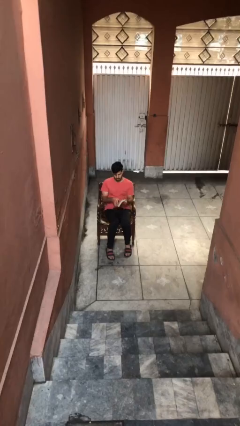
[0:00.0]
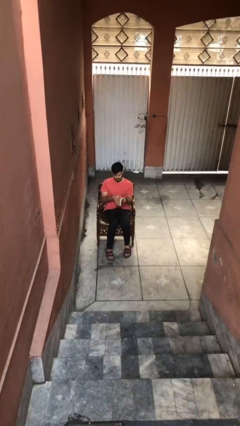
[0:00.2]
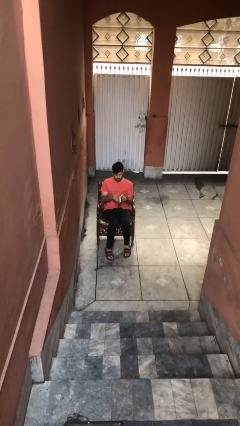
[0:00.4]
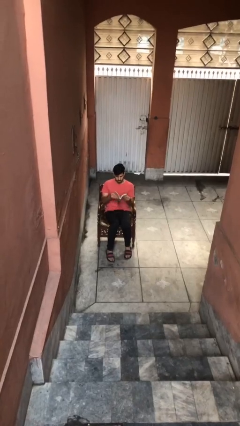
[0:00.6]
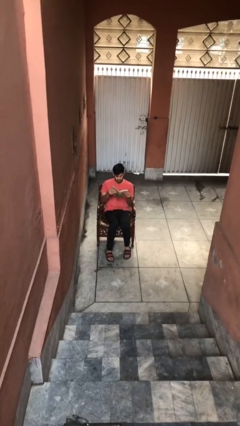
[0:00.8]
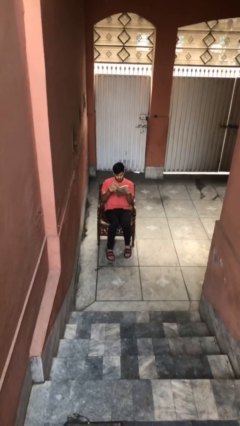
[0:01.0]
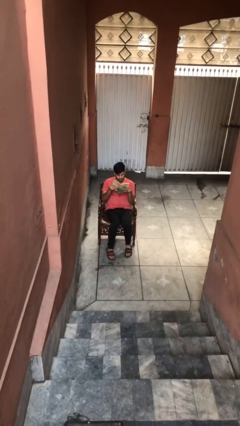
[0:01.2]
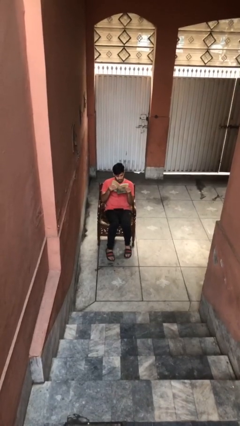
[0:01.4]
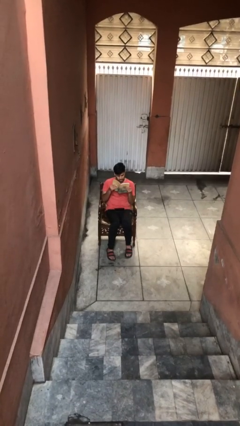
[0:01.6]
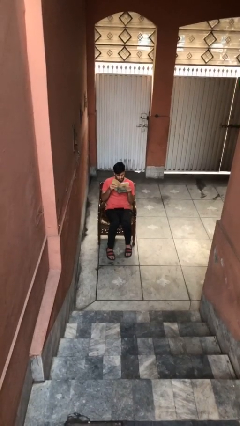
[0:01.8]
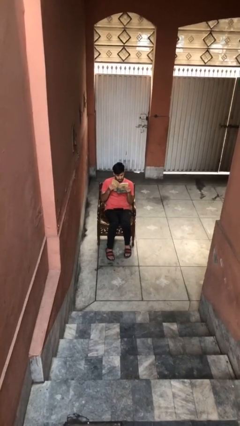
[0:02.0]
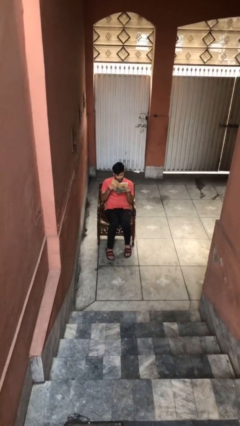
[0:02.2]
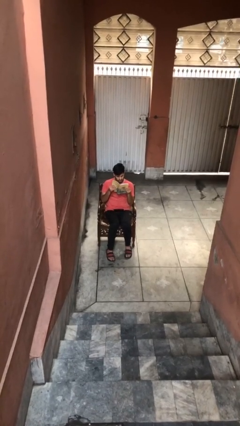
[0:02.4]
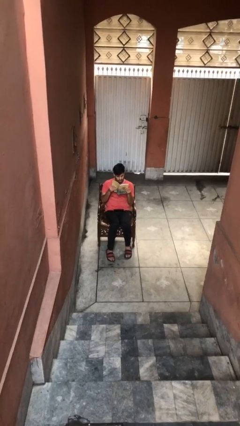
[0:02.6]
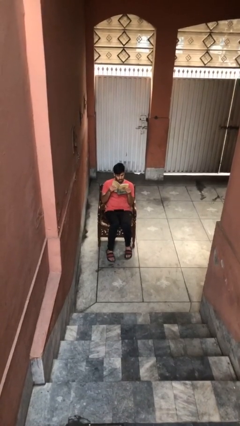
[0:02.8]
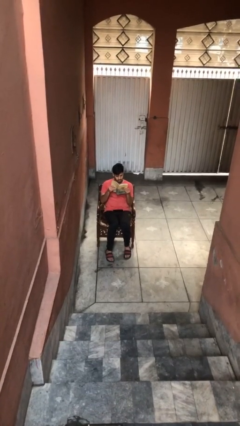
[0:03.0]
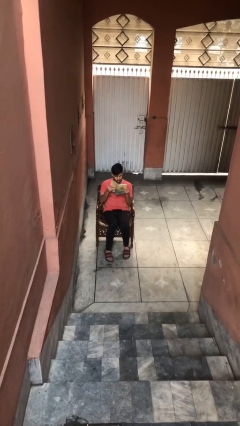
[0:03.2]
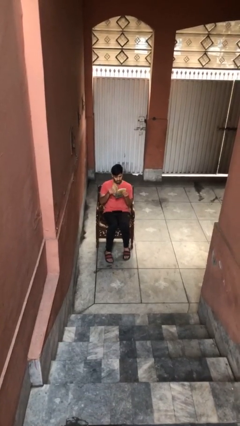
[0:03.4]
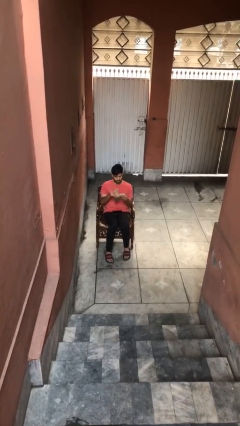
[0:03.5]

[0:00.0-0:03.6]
person reads document

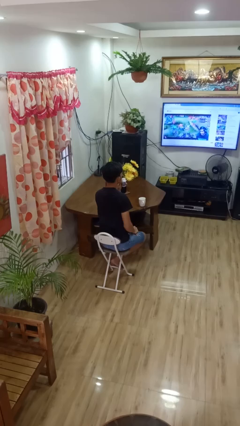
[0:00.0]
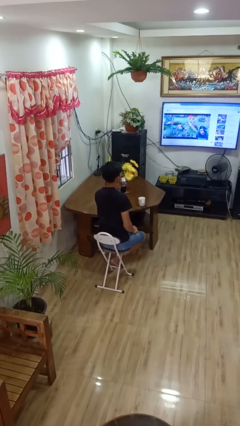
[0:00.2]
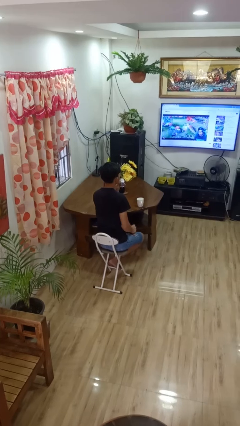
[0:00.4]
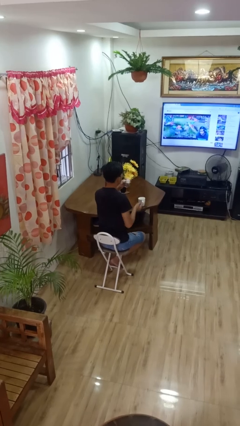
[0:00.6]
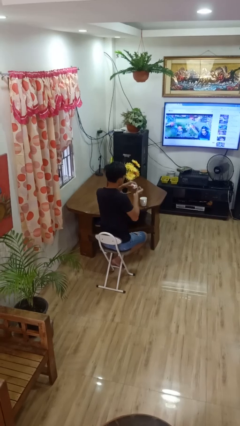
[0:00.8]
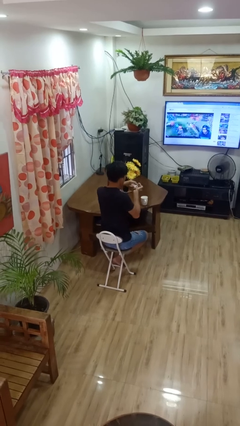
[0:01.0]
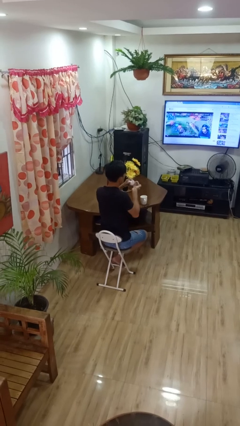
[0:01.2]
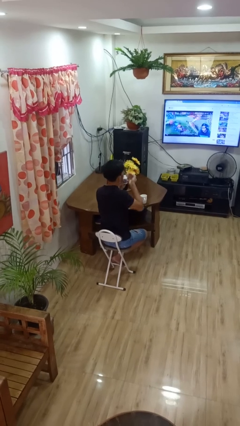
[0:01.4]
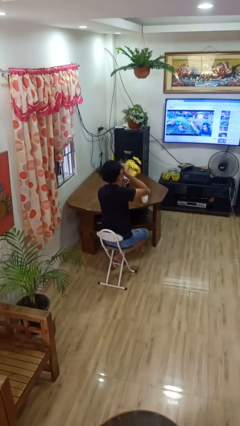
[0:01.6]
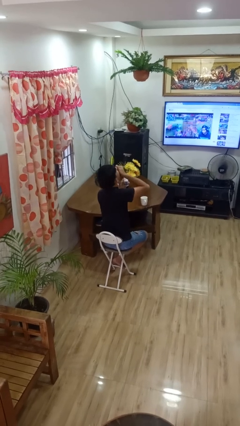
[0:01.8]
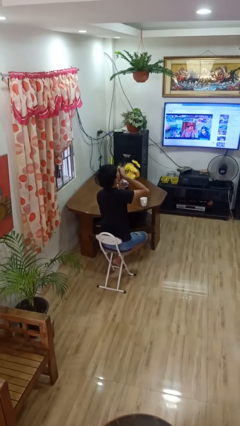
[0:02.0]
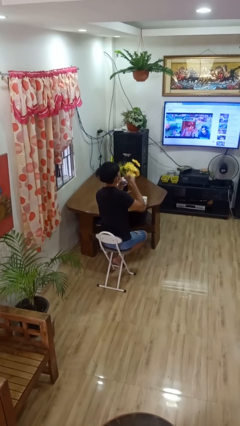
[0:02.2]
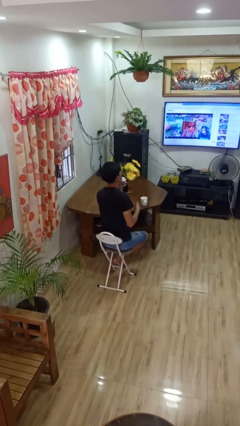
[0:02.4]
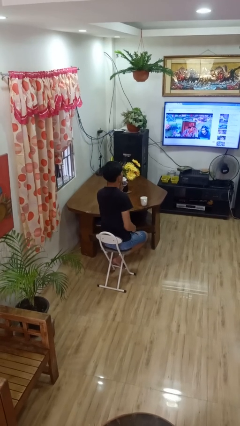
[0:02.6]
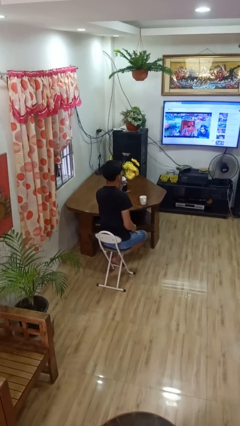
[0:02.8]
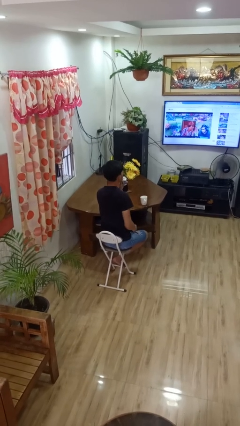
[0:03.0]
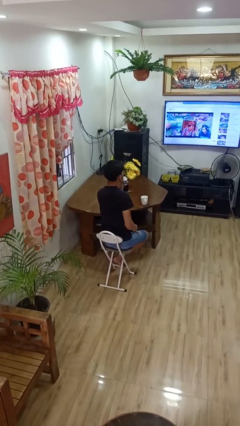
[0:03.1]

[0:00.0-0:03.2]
person takes medicine pills

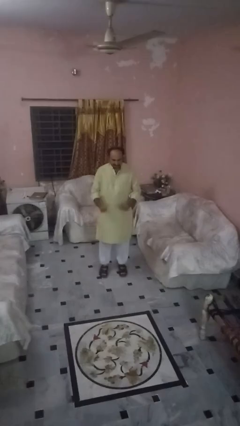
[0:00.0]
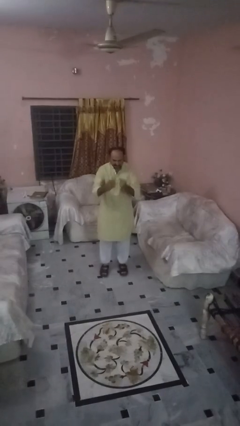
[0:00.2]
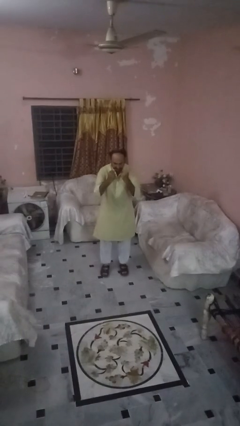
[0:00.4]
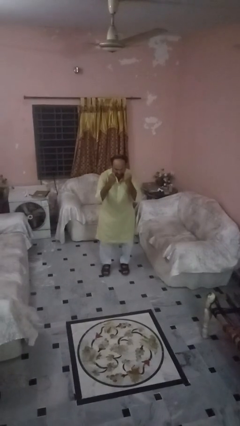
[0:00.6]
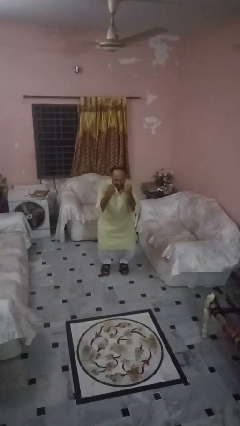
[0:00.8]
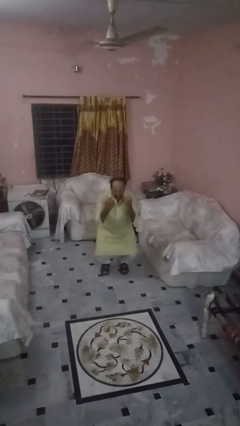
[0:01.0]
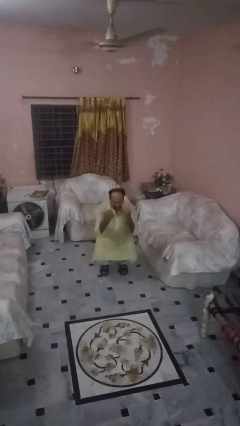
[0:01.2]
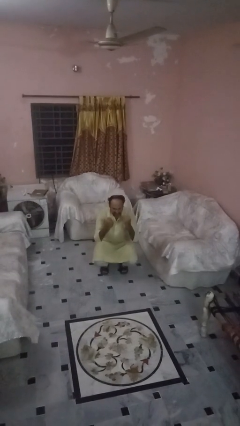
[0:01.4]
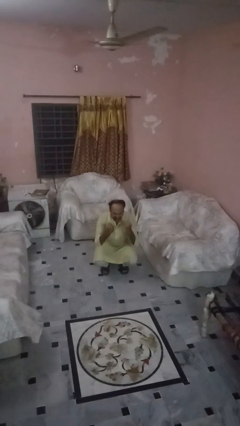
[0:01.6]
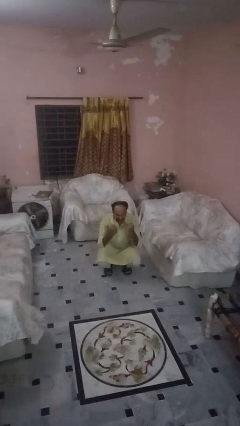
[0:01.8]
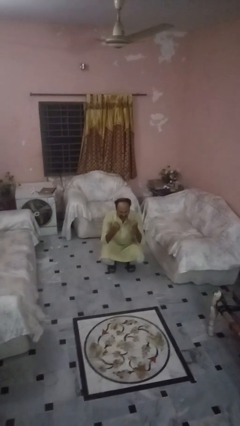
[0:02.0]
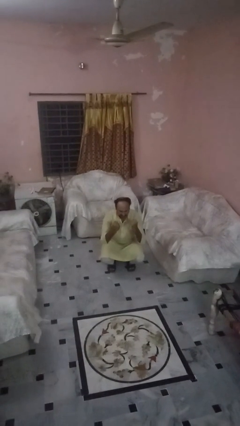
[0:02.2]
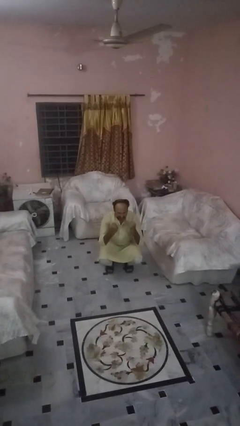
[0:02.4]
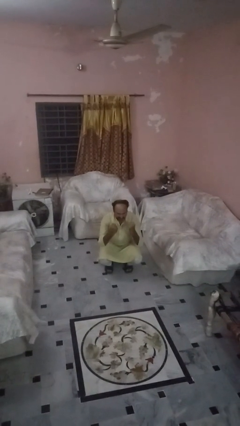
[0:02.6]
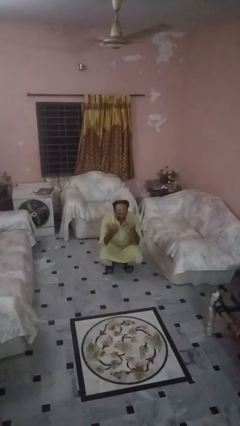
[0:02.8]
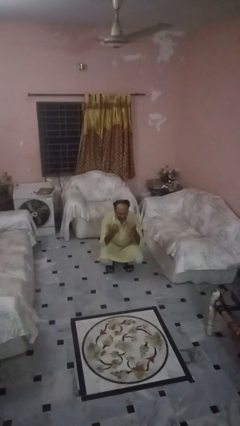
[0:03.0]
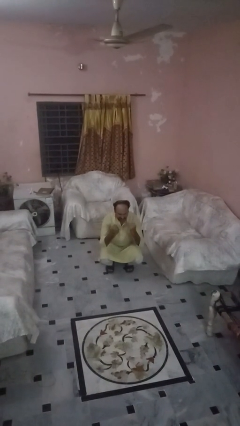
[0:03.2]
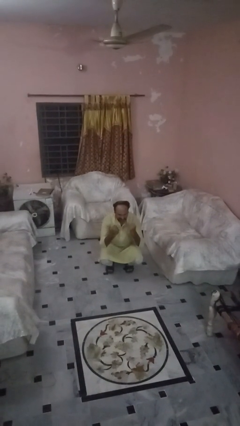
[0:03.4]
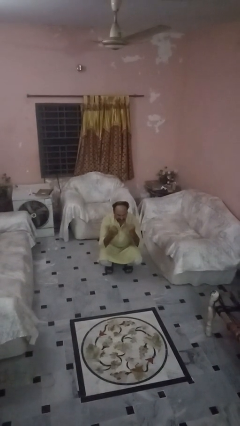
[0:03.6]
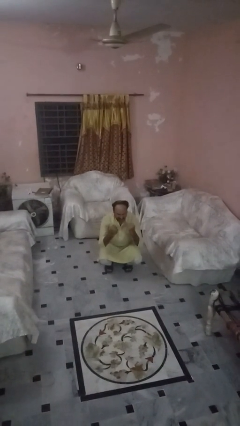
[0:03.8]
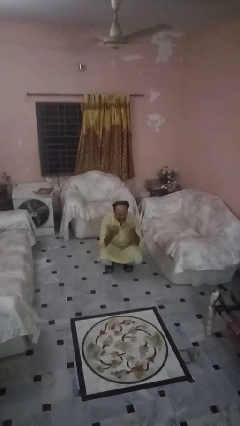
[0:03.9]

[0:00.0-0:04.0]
person squats

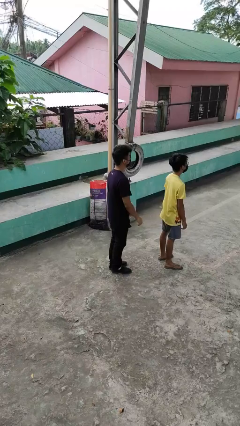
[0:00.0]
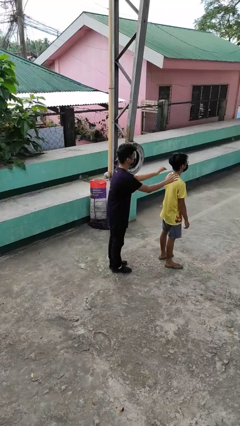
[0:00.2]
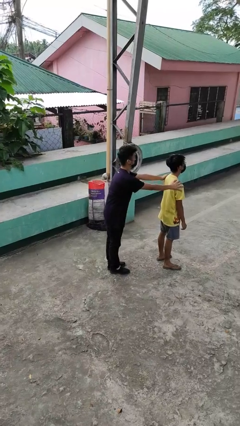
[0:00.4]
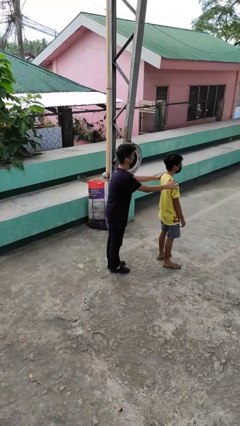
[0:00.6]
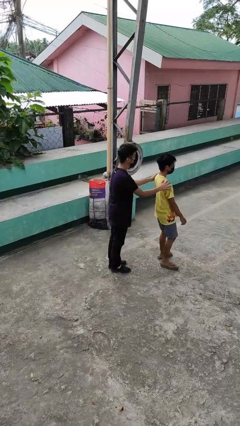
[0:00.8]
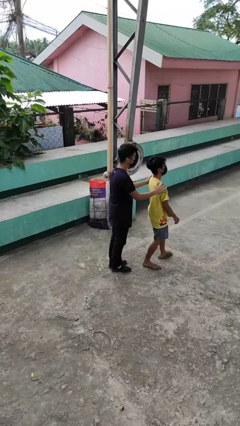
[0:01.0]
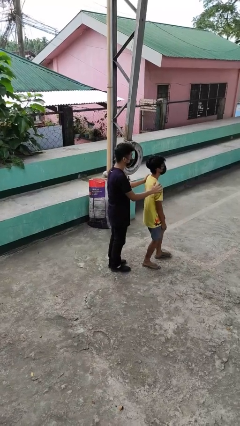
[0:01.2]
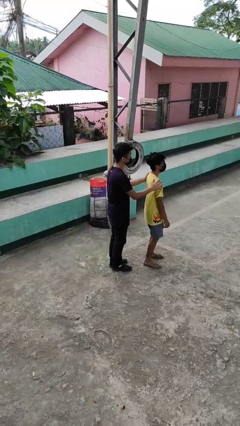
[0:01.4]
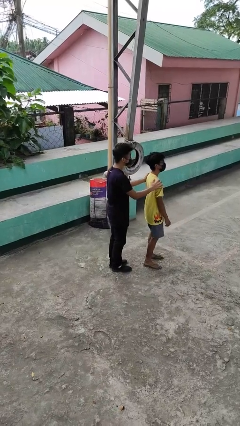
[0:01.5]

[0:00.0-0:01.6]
person grabs person by shoulder

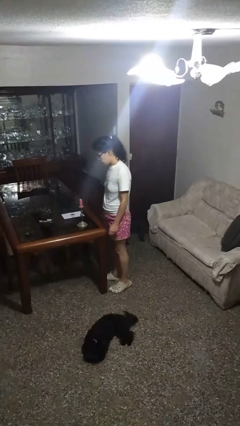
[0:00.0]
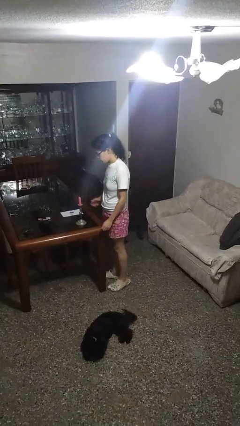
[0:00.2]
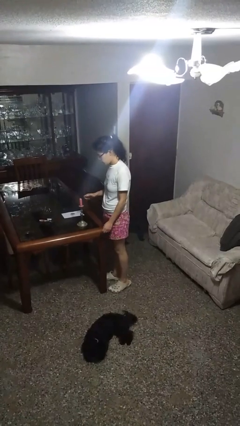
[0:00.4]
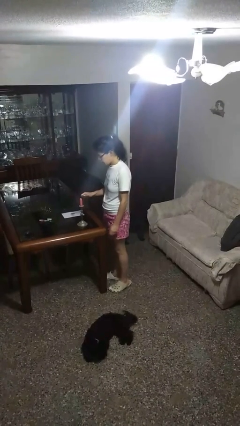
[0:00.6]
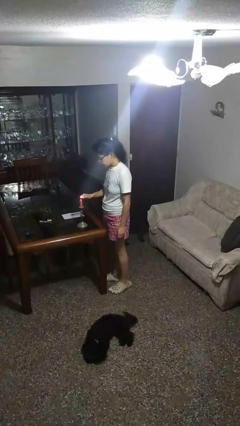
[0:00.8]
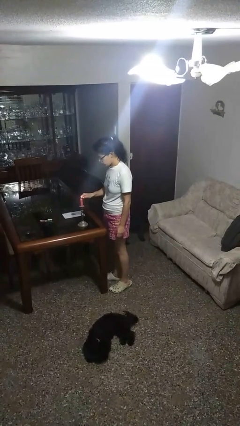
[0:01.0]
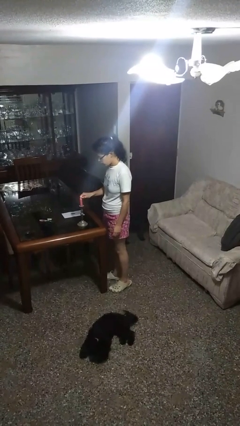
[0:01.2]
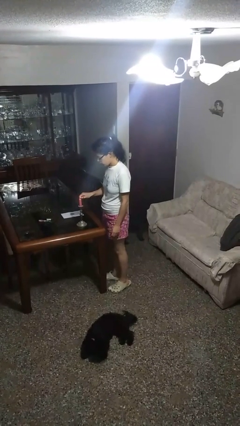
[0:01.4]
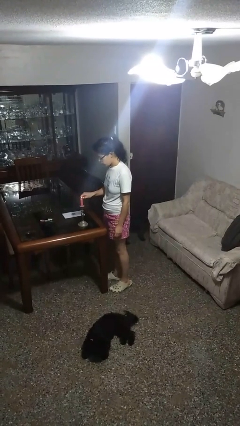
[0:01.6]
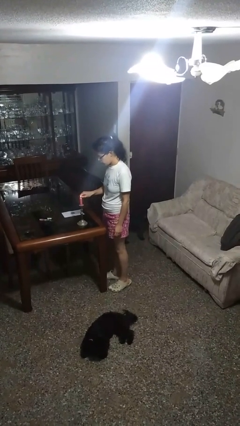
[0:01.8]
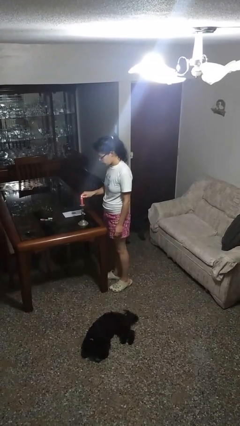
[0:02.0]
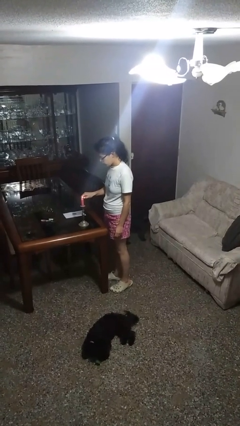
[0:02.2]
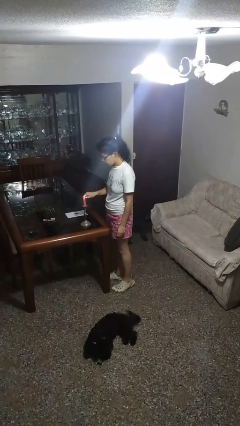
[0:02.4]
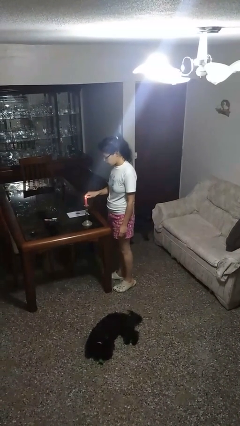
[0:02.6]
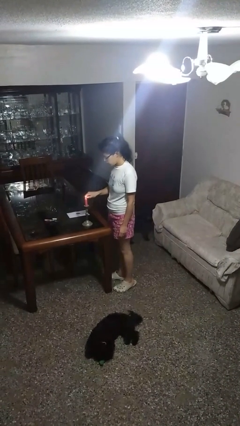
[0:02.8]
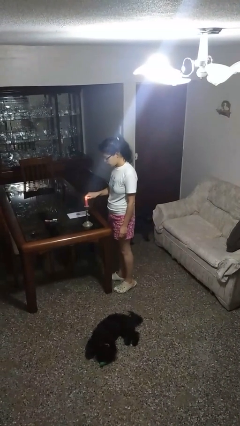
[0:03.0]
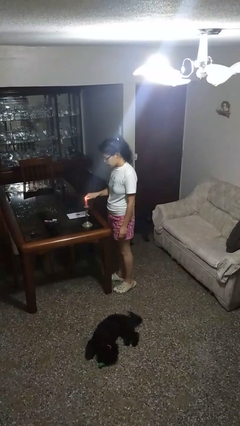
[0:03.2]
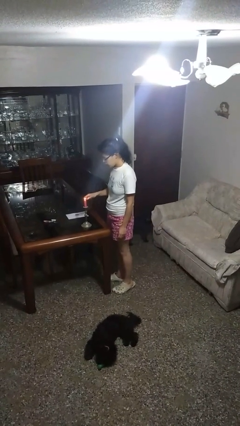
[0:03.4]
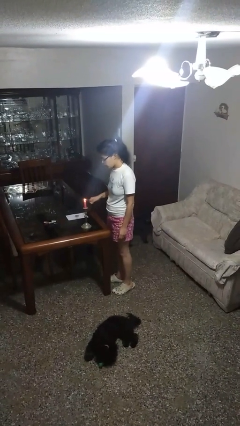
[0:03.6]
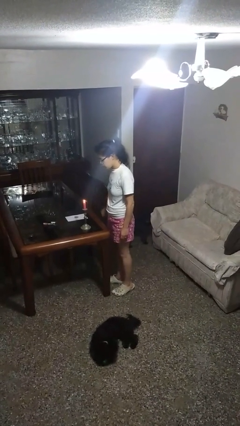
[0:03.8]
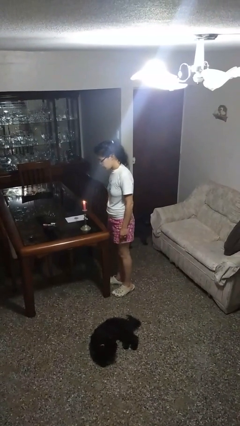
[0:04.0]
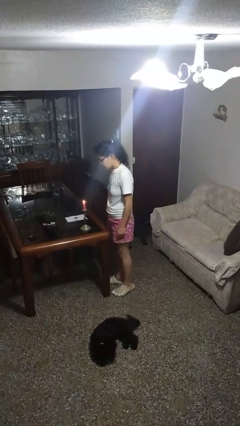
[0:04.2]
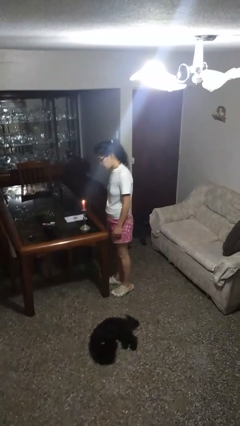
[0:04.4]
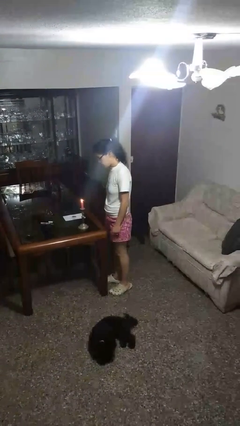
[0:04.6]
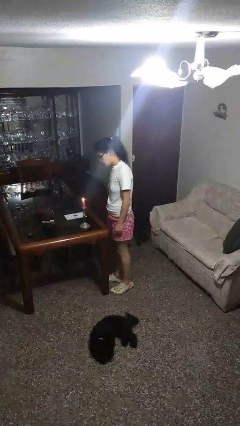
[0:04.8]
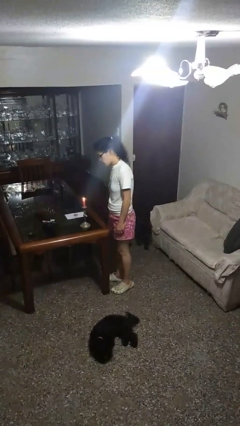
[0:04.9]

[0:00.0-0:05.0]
person lights candle

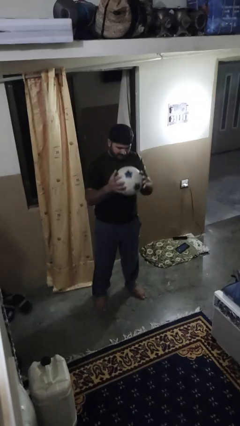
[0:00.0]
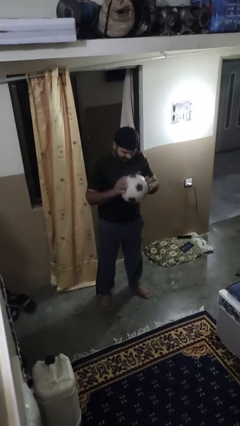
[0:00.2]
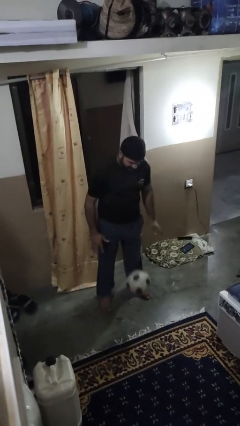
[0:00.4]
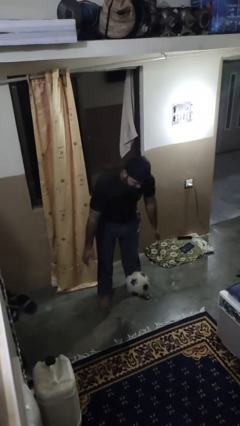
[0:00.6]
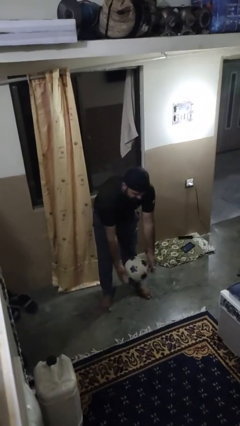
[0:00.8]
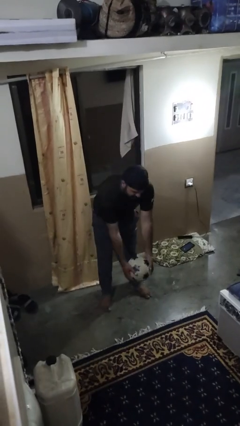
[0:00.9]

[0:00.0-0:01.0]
person bounces ball on floor
